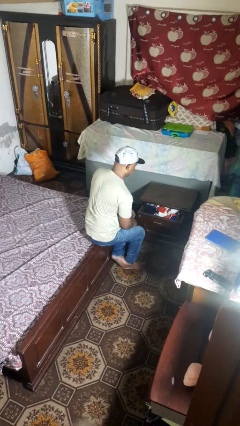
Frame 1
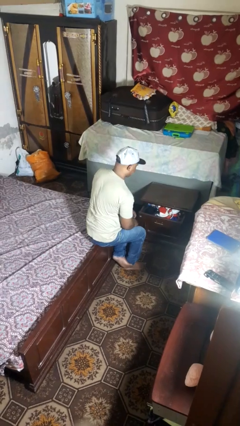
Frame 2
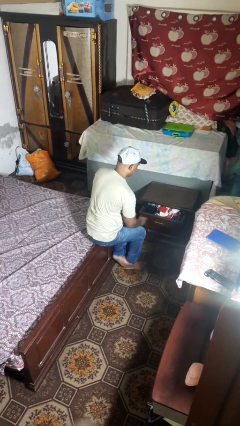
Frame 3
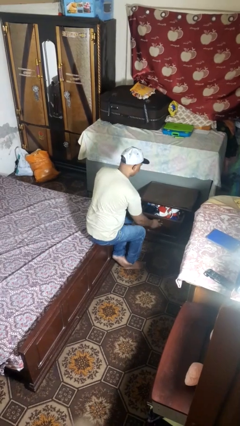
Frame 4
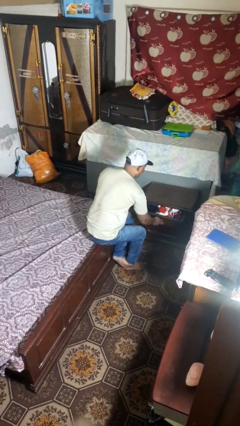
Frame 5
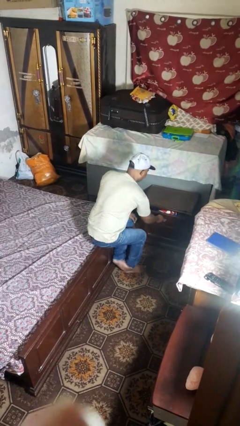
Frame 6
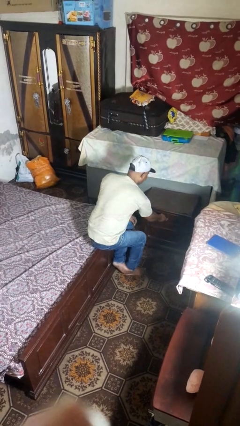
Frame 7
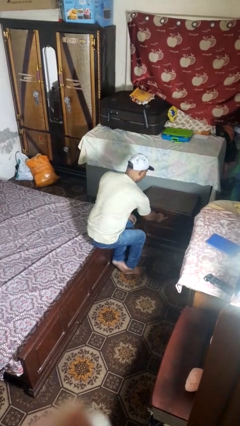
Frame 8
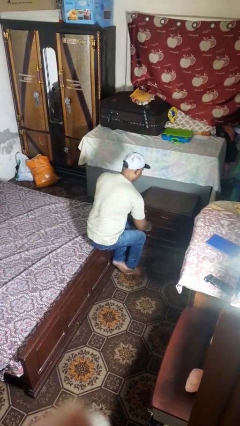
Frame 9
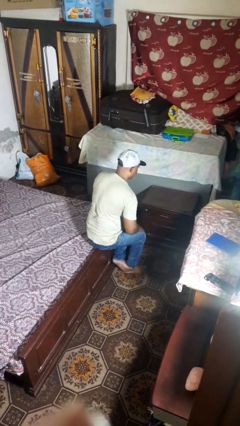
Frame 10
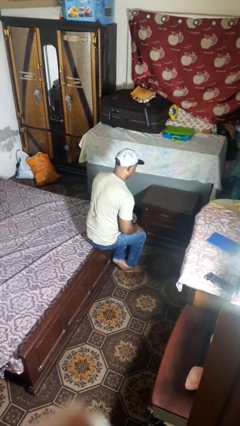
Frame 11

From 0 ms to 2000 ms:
person closes dresser drawer

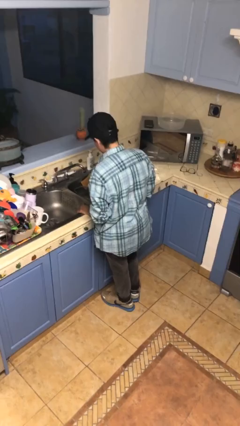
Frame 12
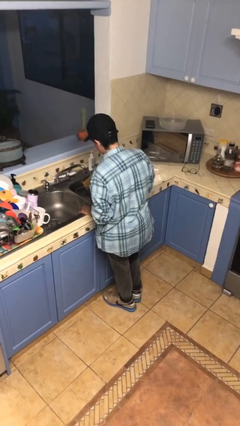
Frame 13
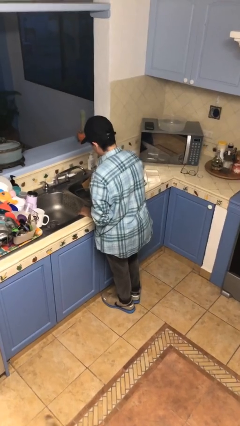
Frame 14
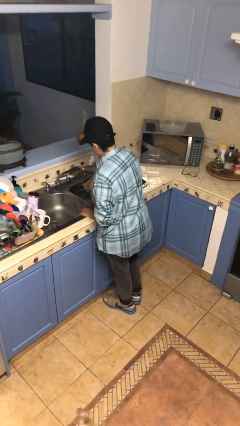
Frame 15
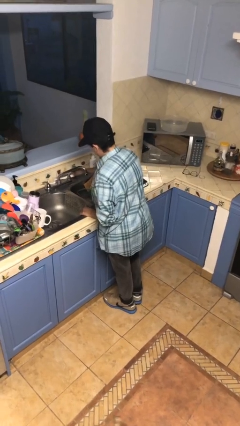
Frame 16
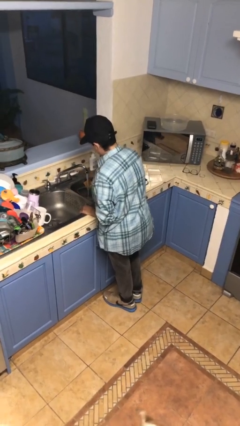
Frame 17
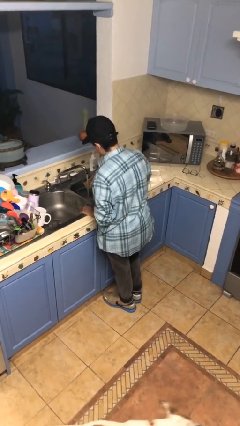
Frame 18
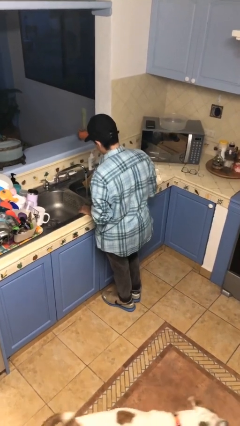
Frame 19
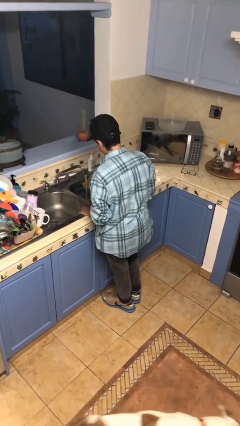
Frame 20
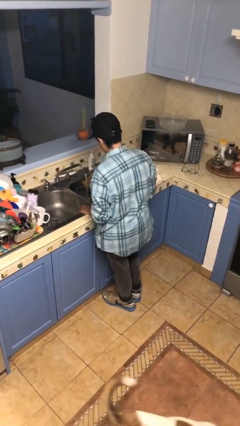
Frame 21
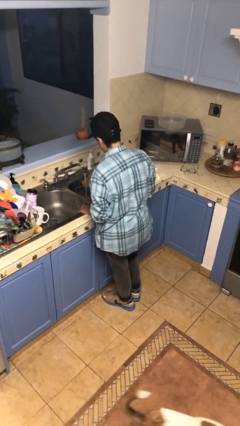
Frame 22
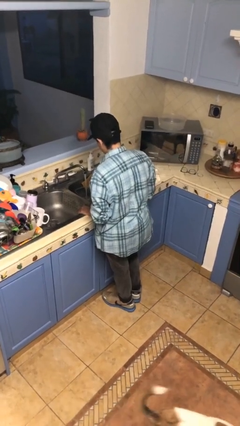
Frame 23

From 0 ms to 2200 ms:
person turns on faucet

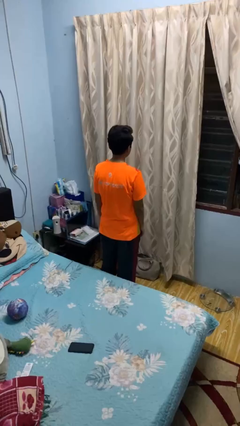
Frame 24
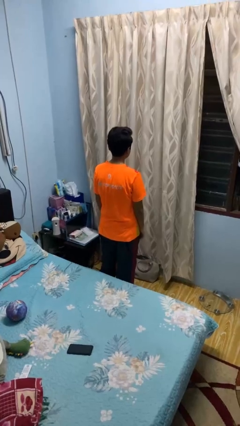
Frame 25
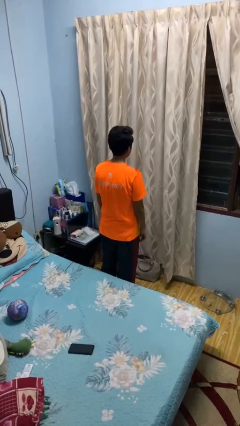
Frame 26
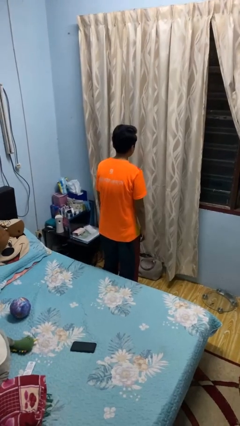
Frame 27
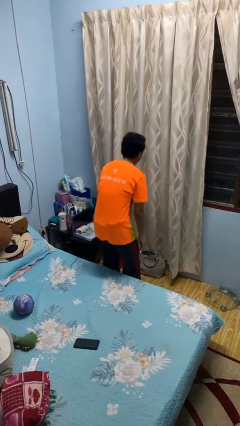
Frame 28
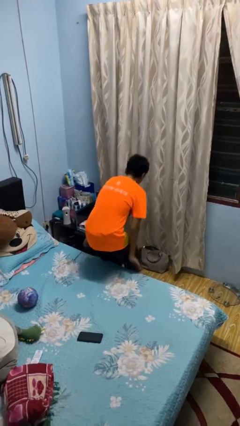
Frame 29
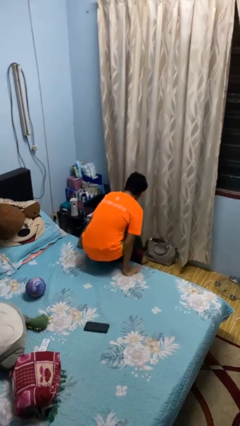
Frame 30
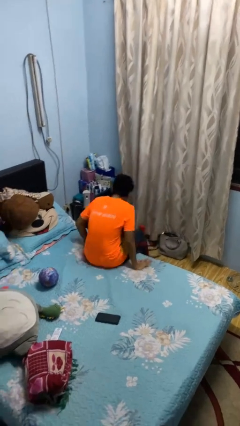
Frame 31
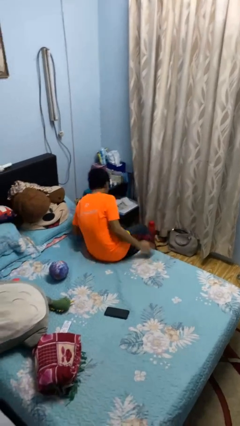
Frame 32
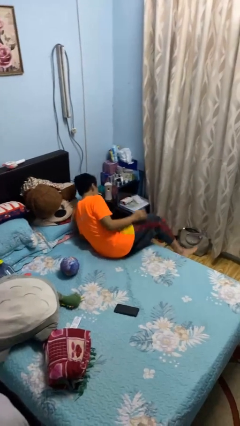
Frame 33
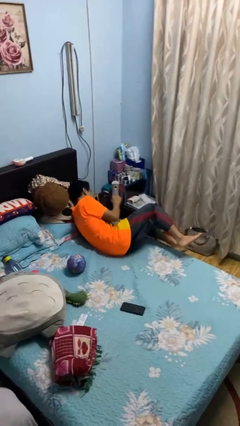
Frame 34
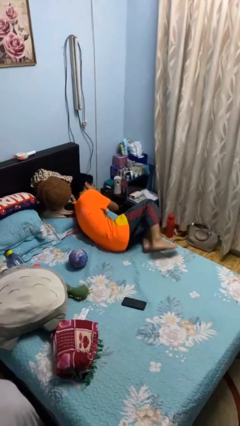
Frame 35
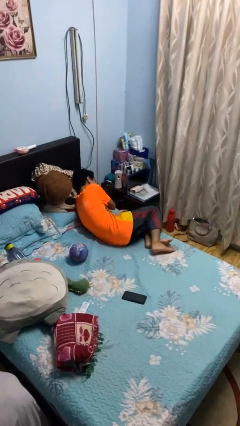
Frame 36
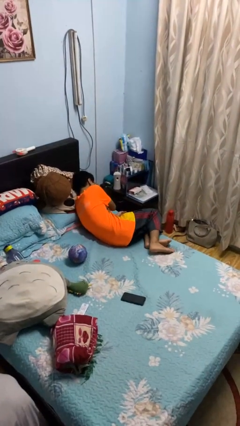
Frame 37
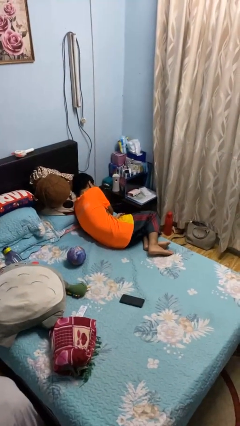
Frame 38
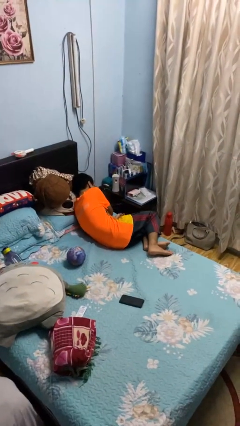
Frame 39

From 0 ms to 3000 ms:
person lies down on bed

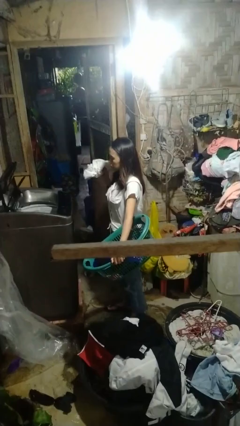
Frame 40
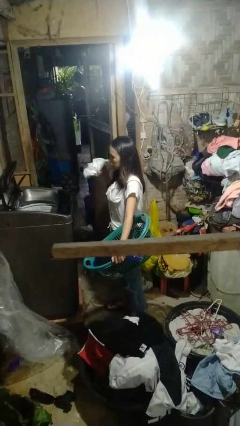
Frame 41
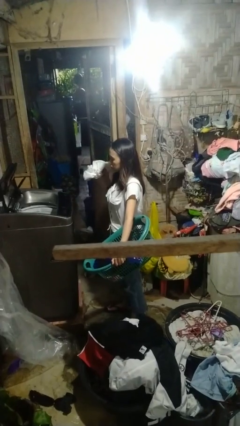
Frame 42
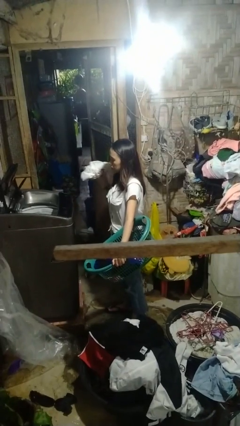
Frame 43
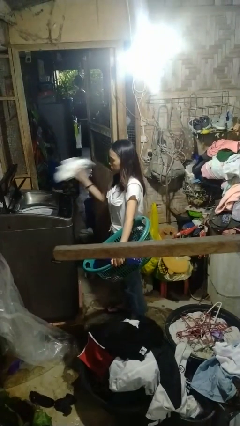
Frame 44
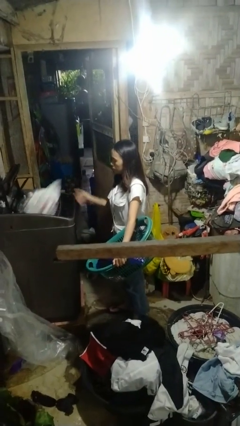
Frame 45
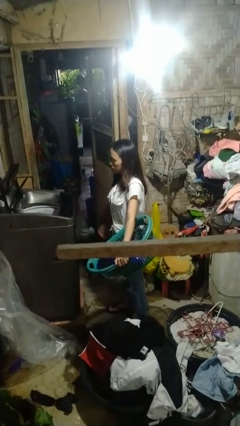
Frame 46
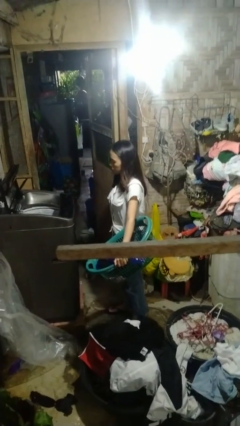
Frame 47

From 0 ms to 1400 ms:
person loads dryer

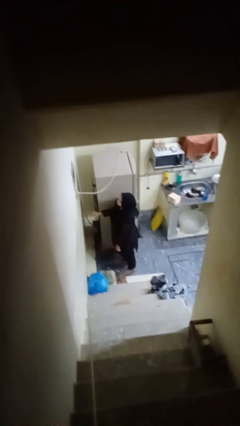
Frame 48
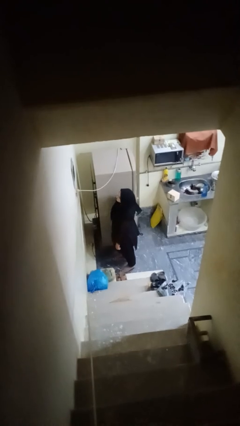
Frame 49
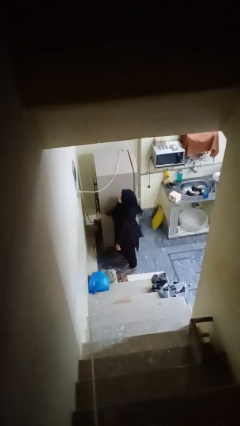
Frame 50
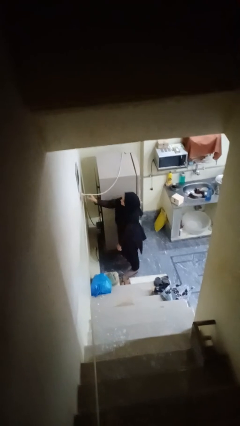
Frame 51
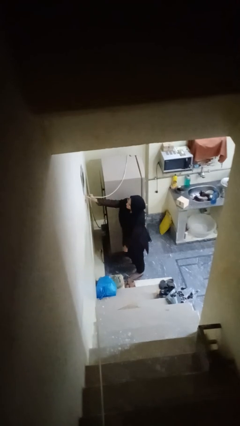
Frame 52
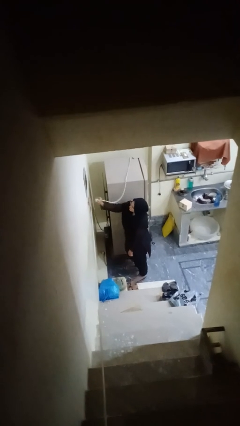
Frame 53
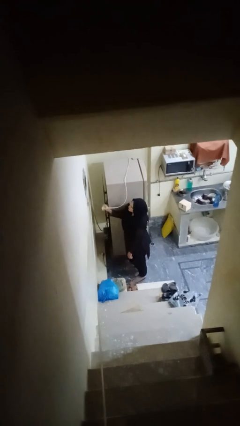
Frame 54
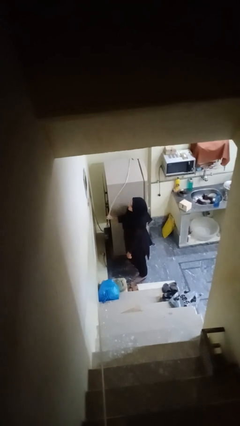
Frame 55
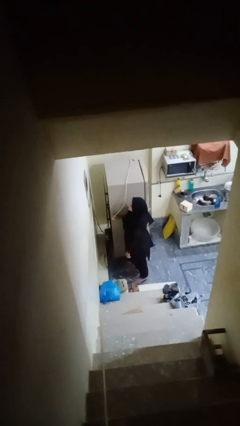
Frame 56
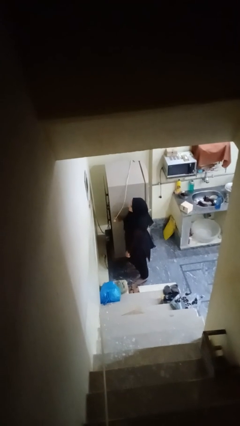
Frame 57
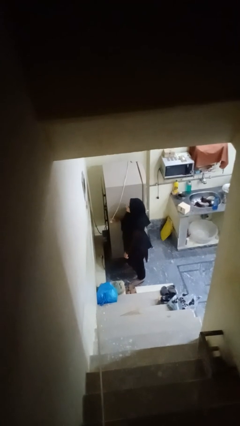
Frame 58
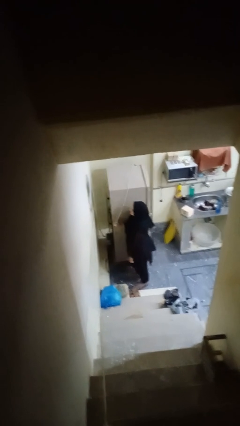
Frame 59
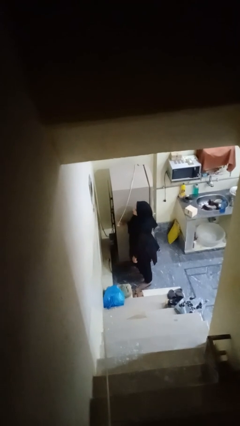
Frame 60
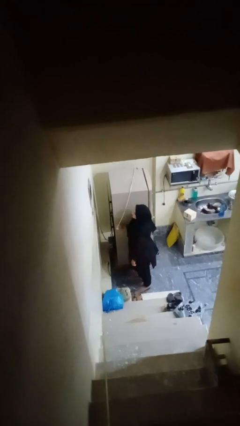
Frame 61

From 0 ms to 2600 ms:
person unplugs from electrical socket

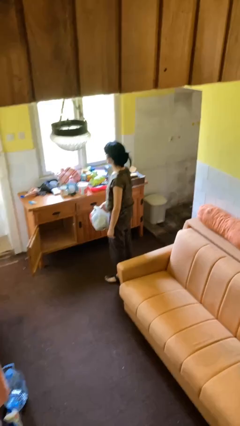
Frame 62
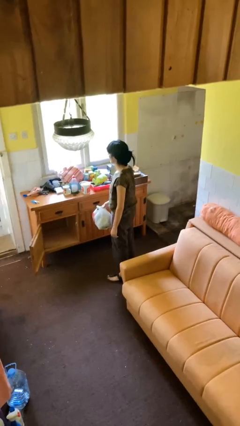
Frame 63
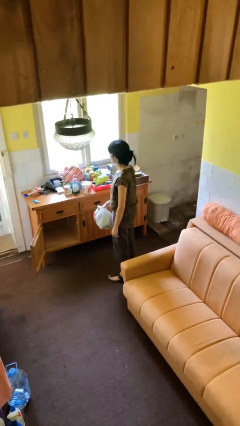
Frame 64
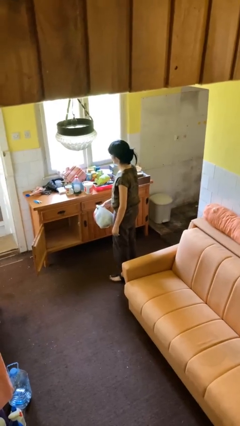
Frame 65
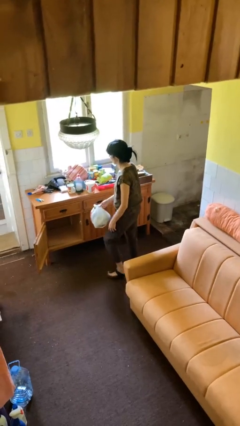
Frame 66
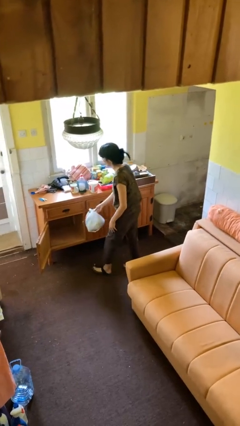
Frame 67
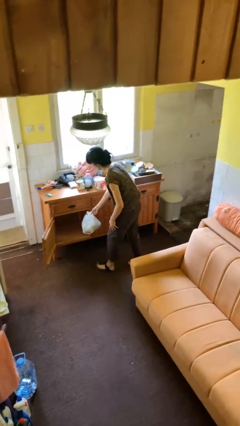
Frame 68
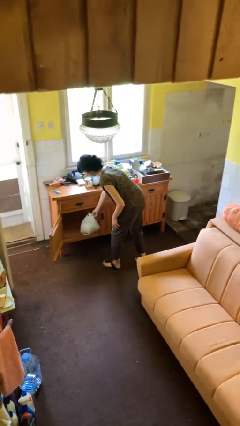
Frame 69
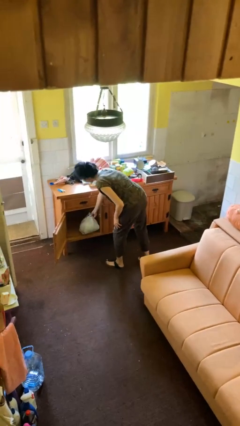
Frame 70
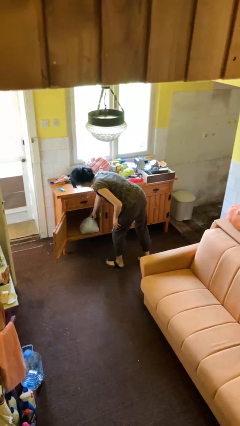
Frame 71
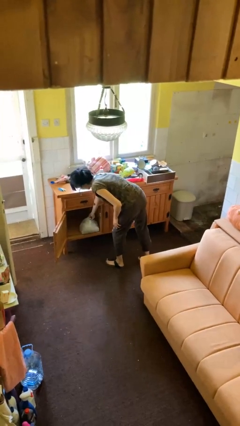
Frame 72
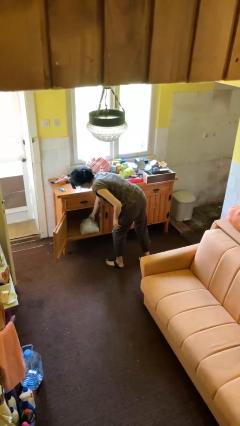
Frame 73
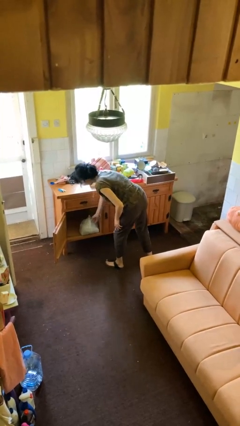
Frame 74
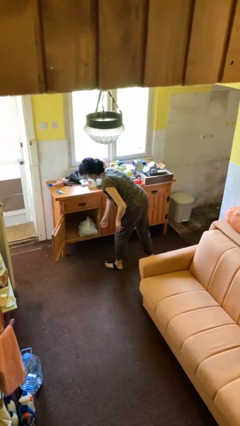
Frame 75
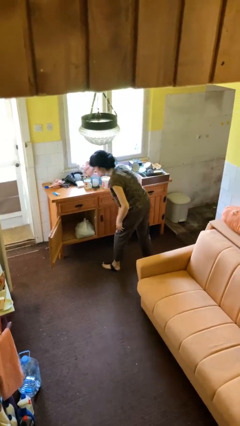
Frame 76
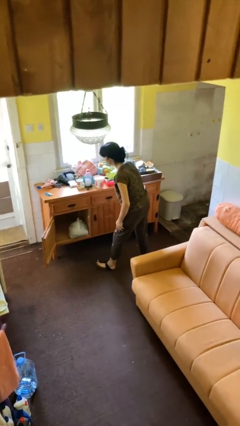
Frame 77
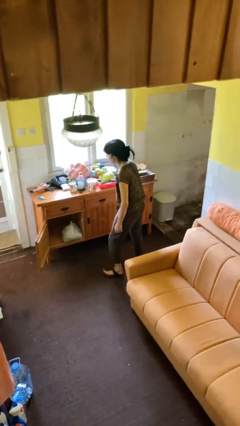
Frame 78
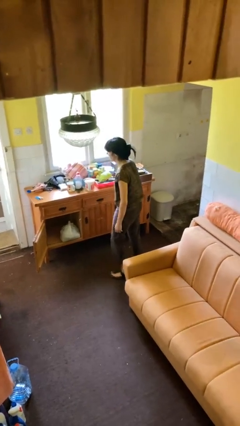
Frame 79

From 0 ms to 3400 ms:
person puts down object into cabinet

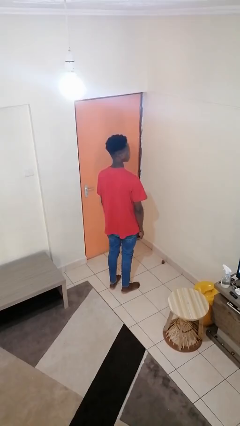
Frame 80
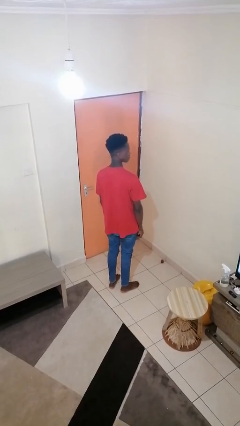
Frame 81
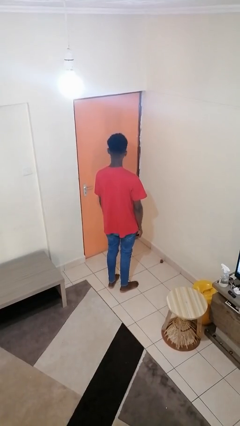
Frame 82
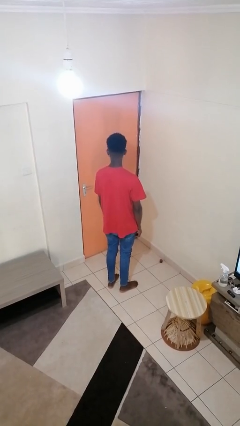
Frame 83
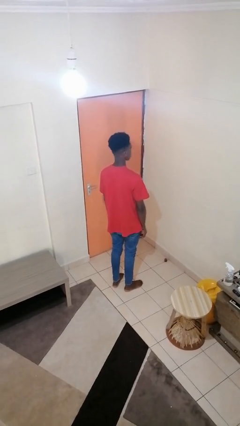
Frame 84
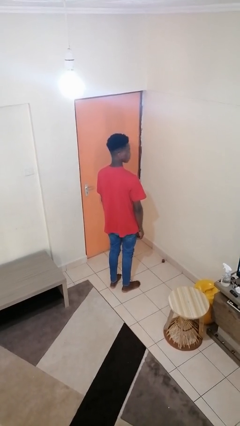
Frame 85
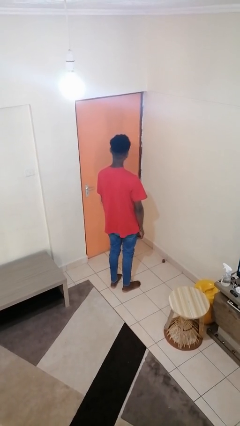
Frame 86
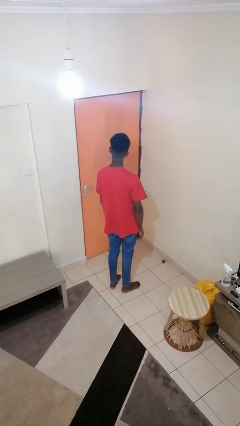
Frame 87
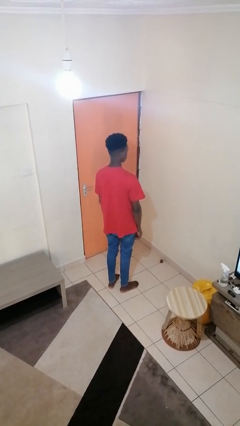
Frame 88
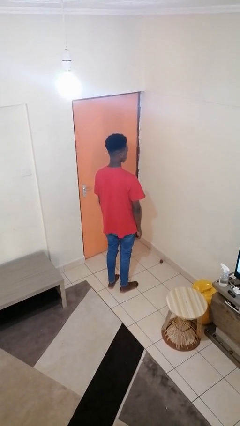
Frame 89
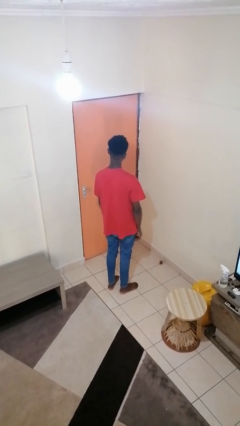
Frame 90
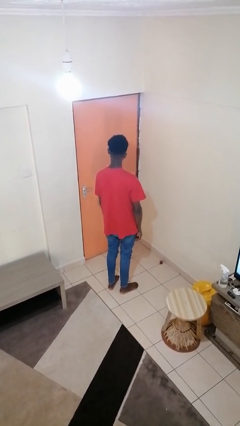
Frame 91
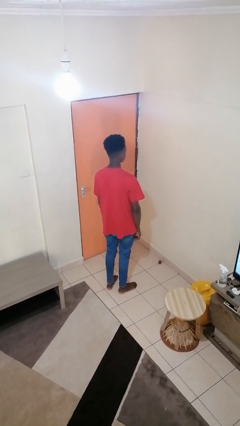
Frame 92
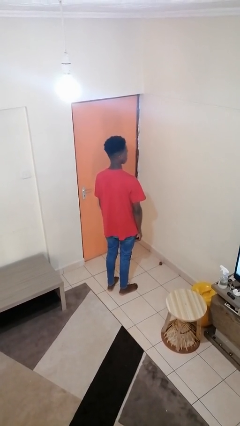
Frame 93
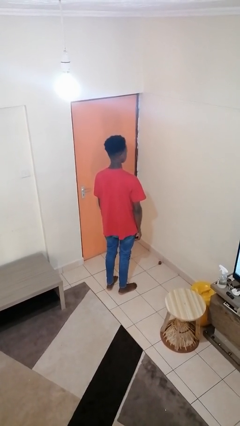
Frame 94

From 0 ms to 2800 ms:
person shakes head
